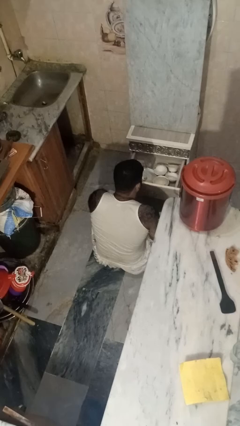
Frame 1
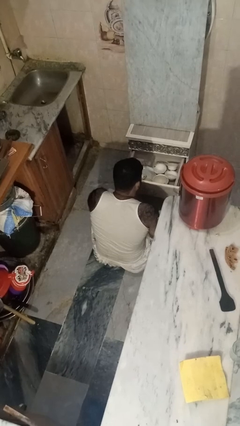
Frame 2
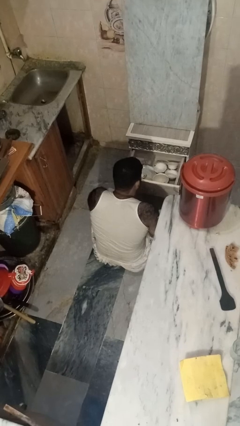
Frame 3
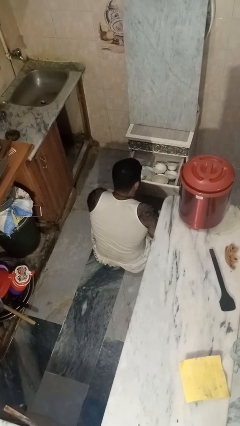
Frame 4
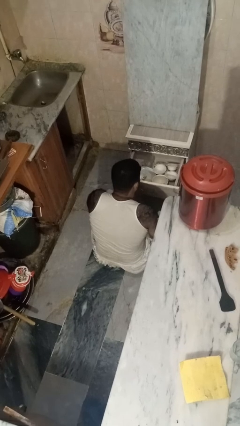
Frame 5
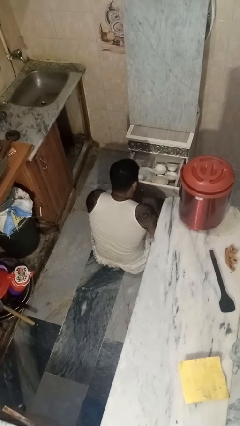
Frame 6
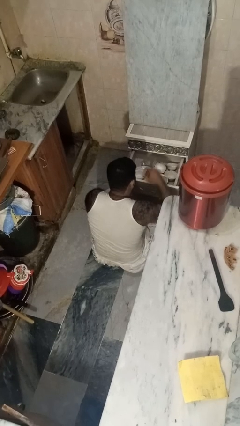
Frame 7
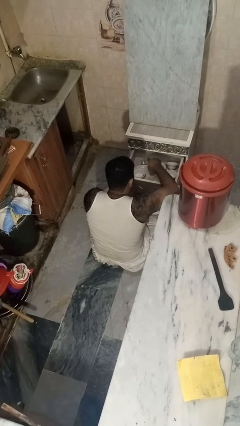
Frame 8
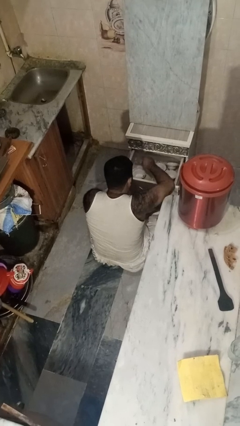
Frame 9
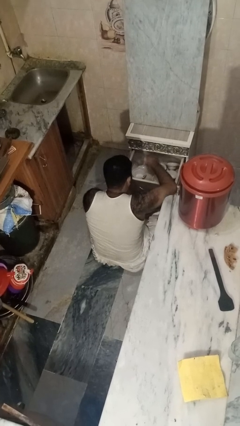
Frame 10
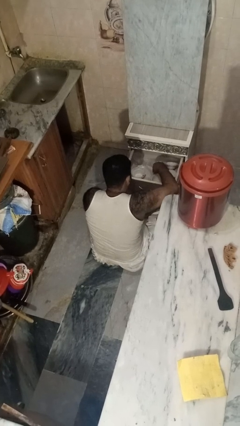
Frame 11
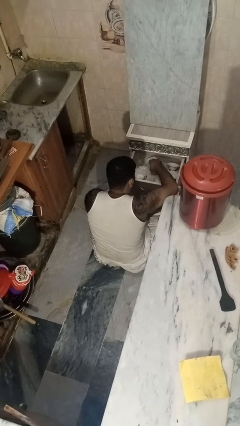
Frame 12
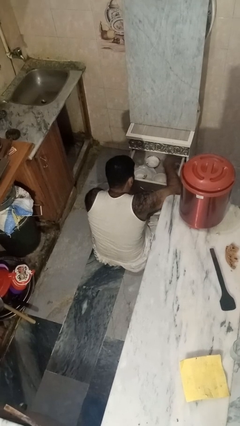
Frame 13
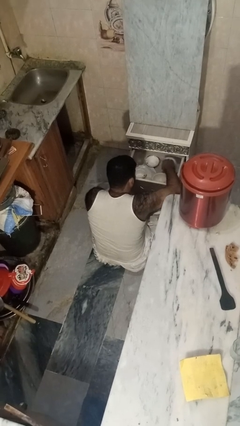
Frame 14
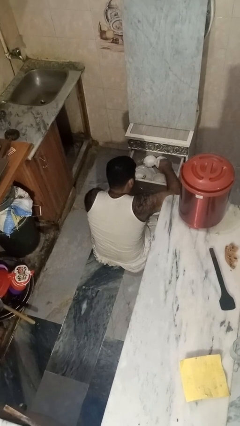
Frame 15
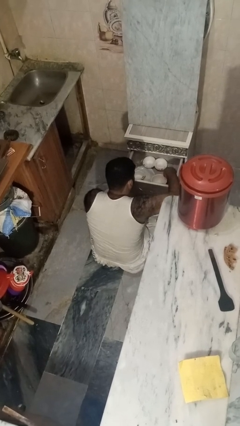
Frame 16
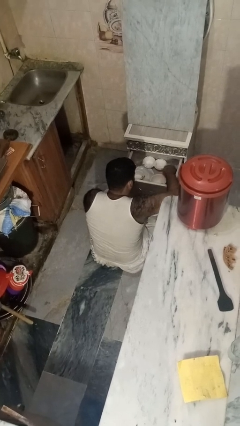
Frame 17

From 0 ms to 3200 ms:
person searches in kitchen drawer

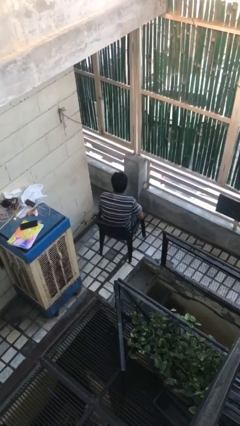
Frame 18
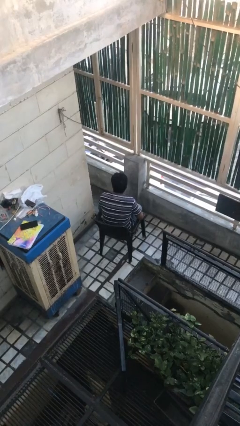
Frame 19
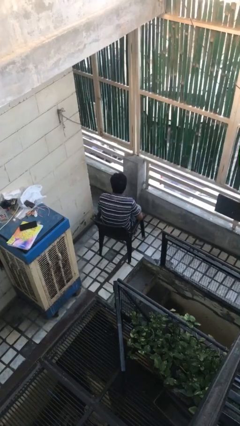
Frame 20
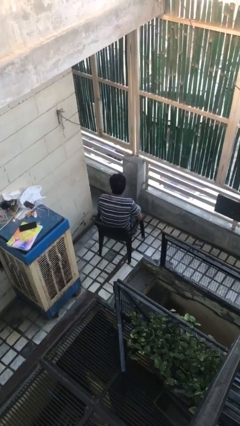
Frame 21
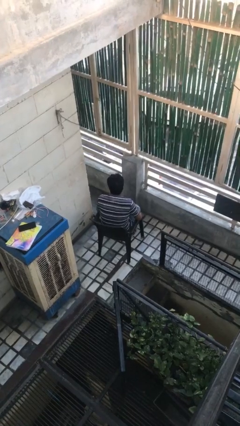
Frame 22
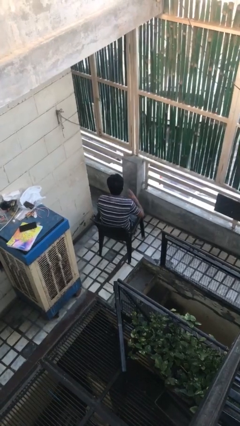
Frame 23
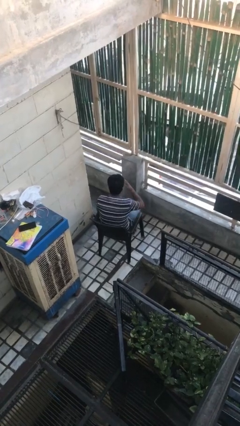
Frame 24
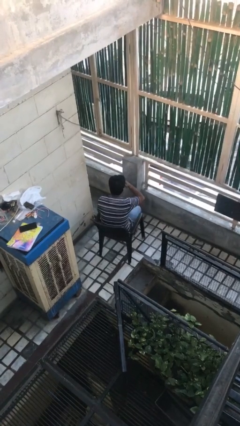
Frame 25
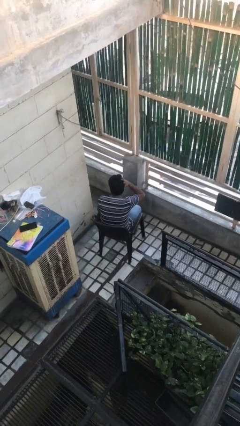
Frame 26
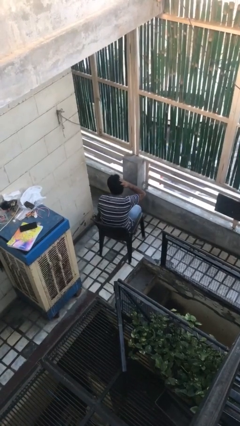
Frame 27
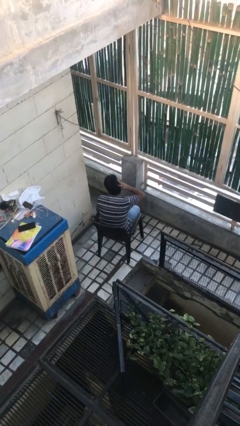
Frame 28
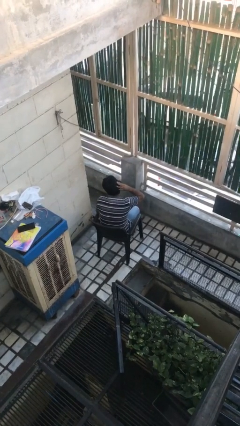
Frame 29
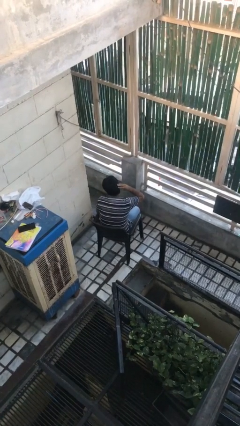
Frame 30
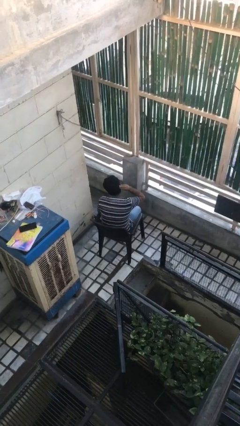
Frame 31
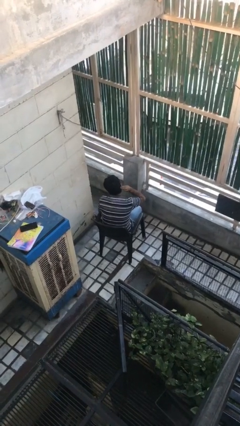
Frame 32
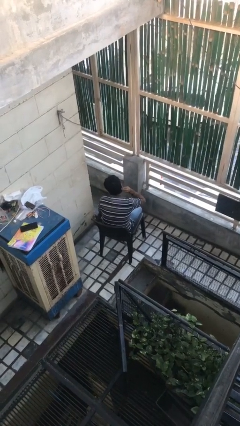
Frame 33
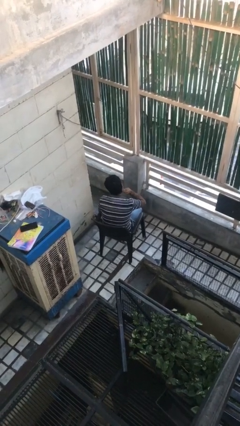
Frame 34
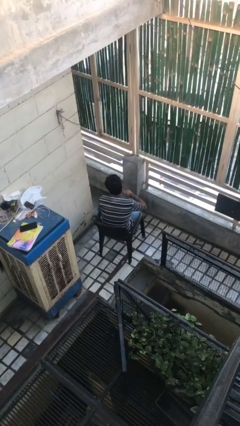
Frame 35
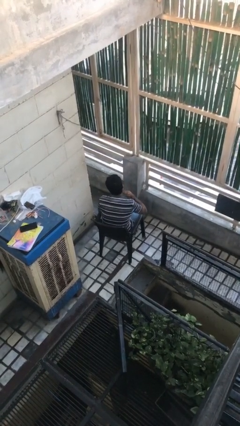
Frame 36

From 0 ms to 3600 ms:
person strokes hair

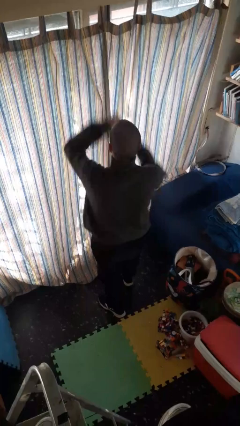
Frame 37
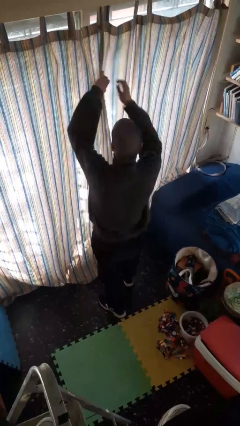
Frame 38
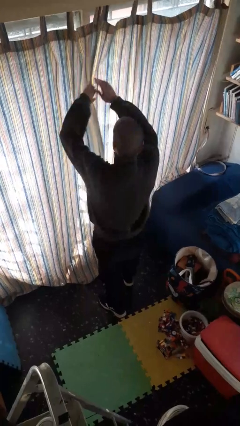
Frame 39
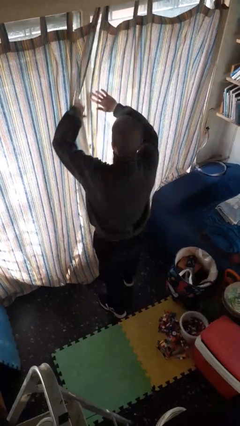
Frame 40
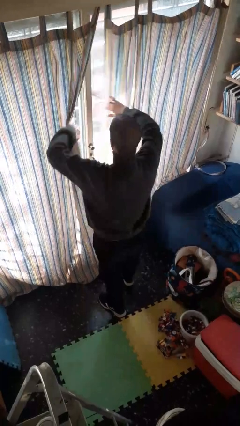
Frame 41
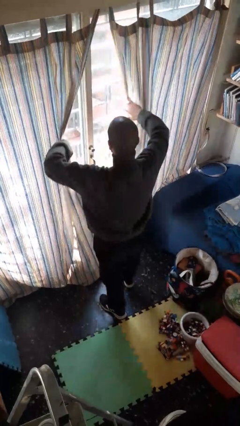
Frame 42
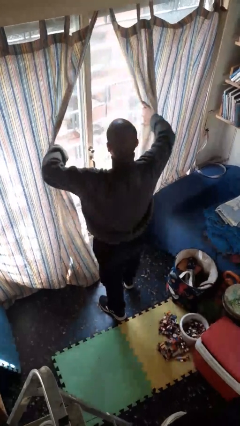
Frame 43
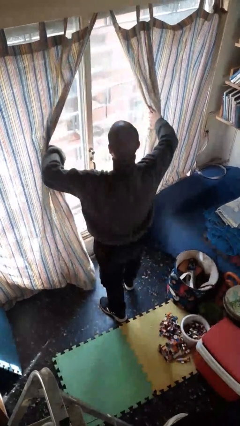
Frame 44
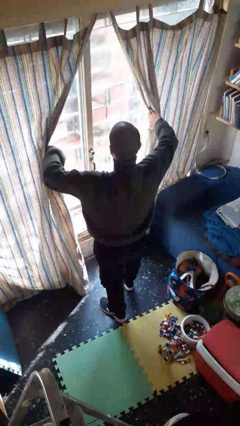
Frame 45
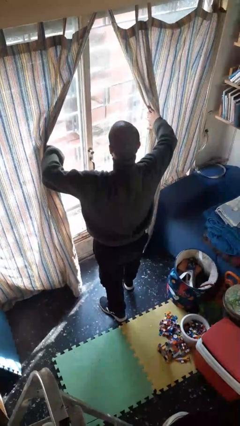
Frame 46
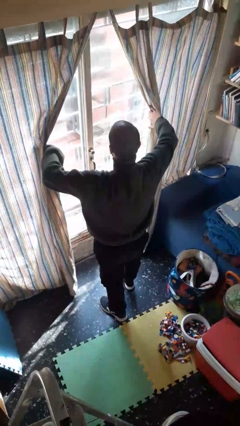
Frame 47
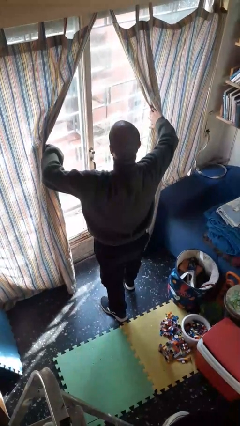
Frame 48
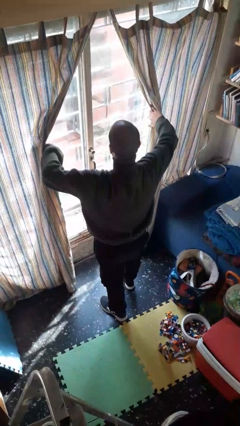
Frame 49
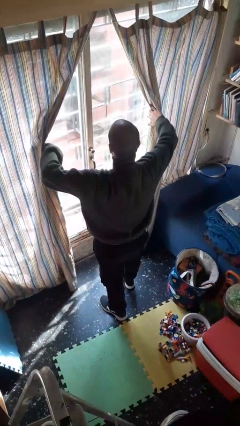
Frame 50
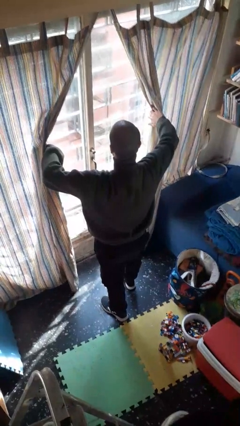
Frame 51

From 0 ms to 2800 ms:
person opens curtains

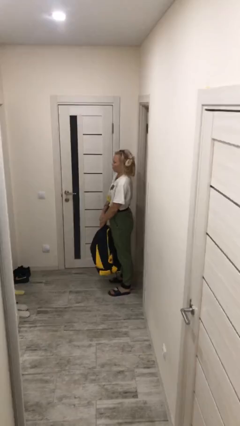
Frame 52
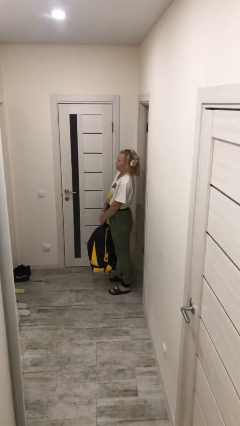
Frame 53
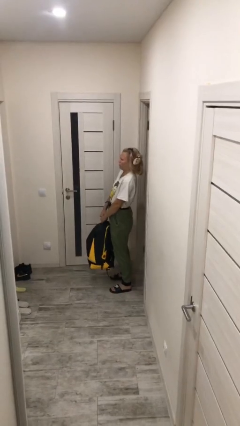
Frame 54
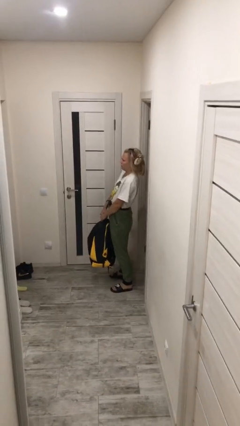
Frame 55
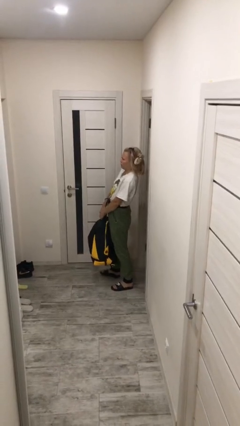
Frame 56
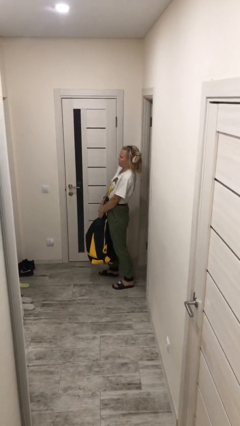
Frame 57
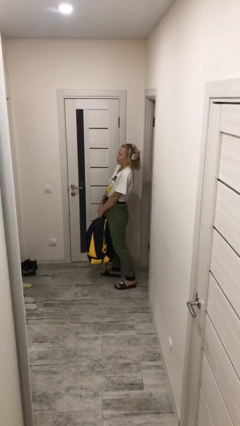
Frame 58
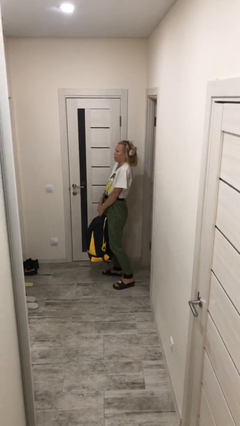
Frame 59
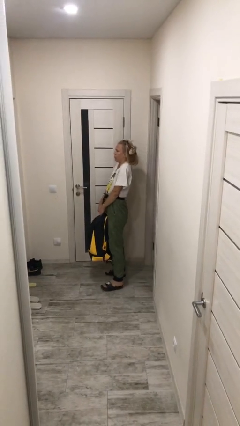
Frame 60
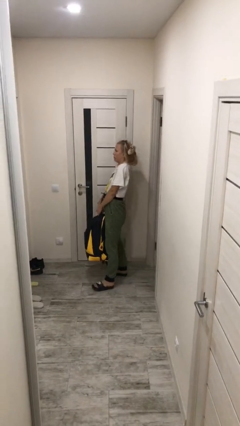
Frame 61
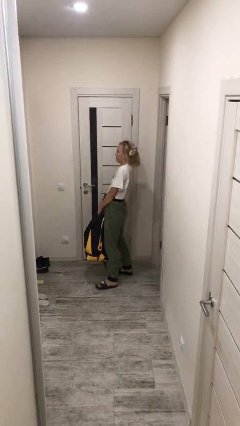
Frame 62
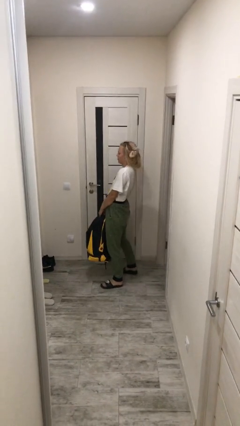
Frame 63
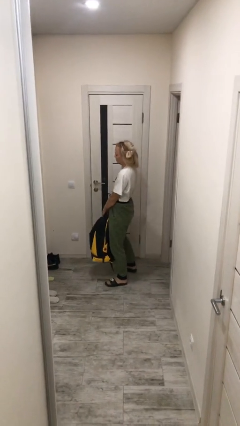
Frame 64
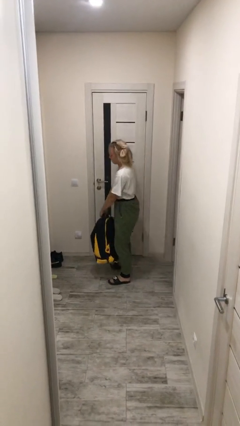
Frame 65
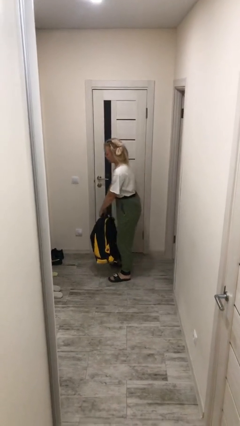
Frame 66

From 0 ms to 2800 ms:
person carries heavy object

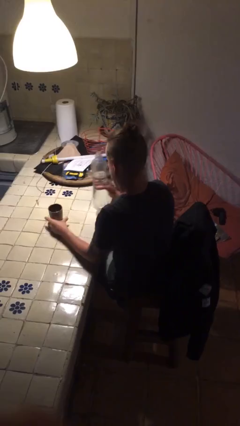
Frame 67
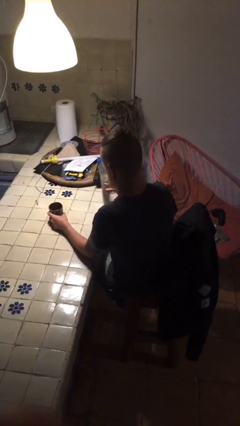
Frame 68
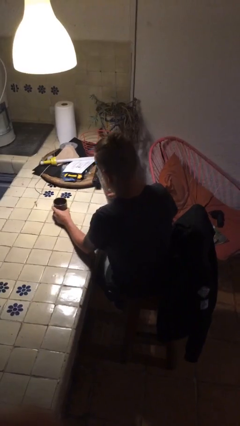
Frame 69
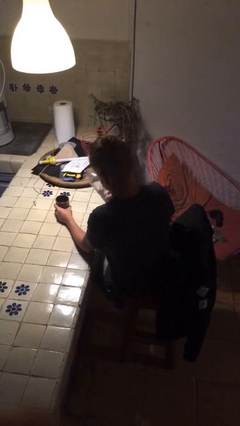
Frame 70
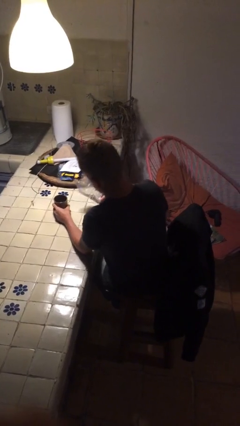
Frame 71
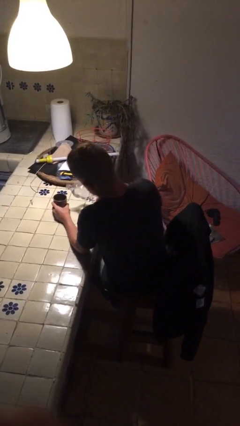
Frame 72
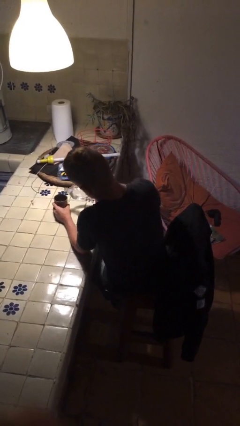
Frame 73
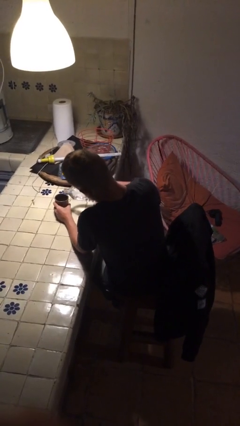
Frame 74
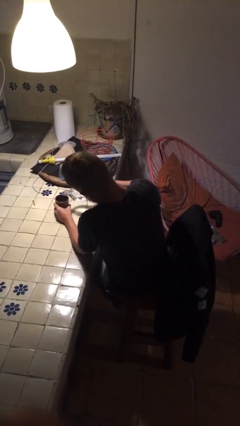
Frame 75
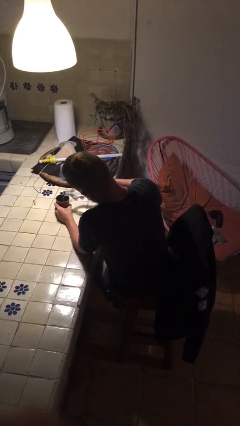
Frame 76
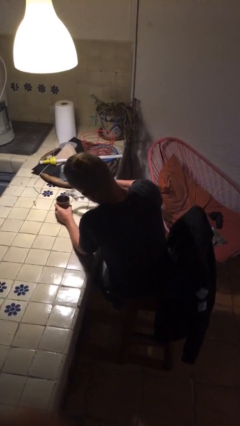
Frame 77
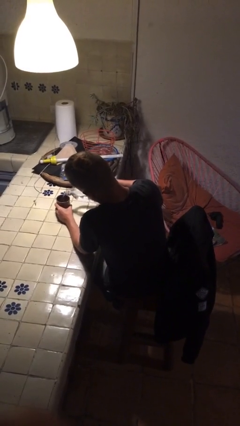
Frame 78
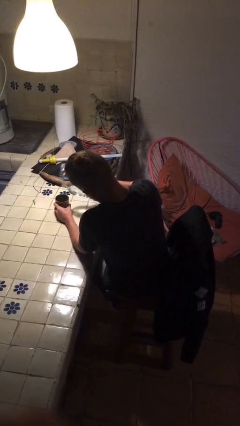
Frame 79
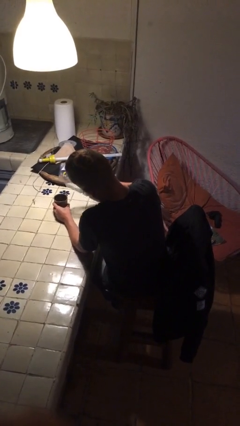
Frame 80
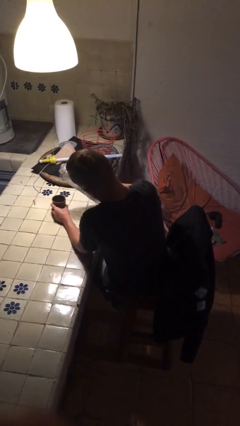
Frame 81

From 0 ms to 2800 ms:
person pours liquid into cup

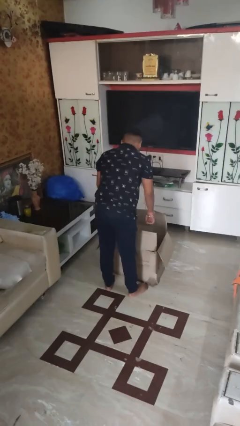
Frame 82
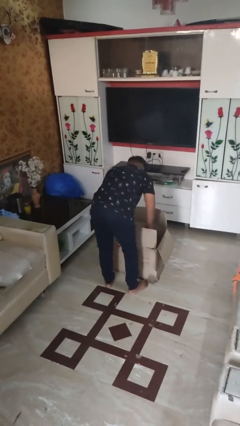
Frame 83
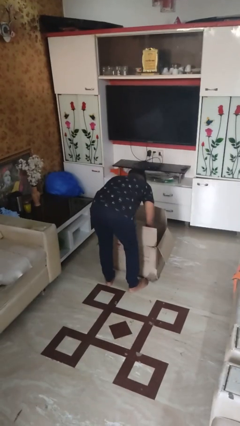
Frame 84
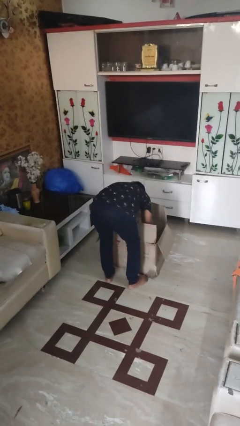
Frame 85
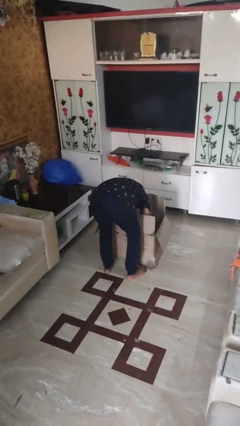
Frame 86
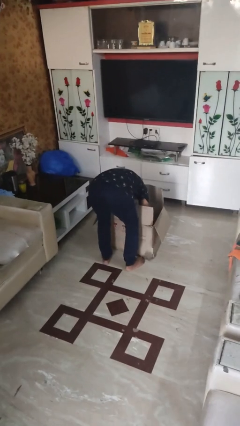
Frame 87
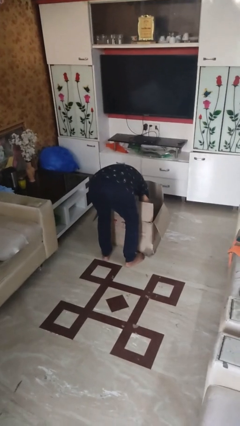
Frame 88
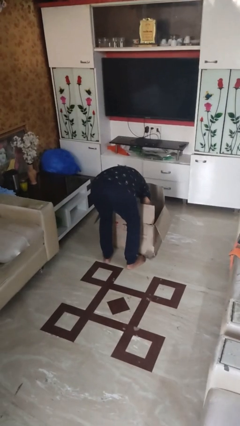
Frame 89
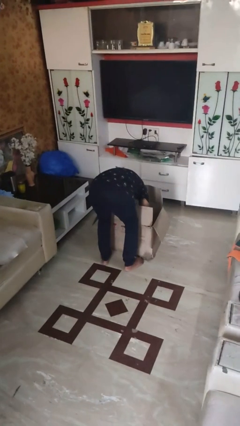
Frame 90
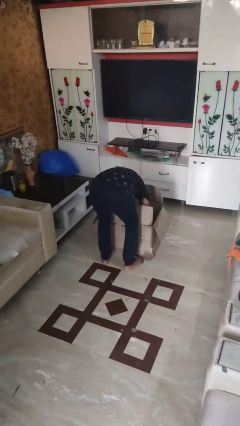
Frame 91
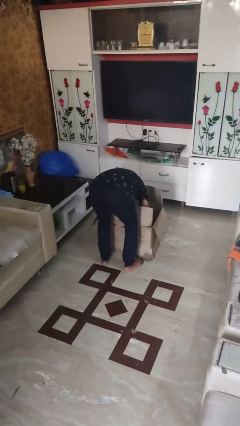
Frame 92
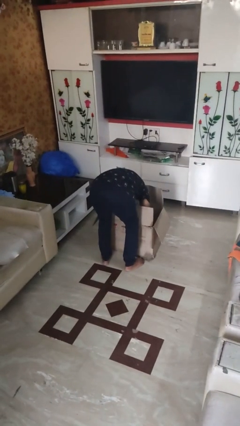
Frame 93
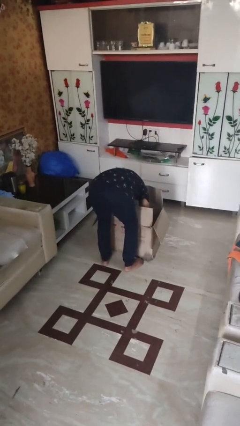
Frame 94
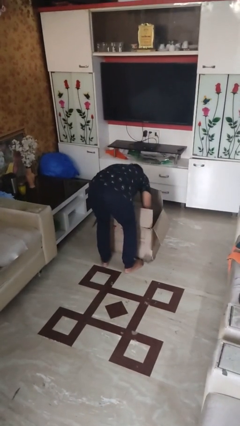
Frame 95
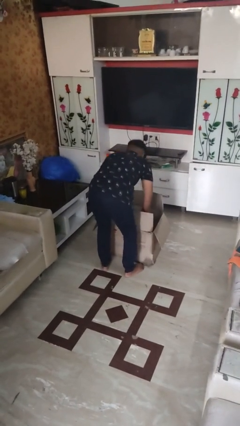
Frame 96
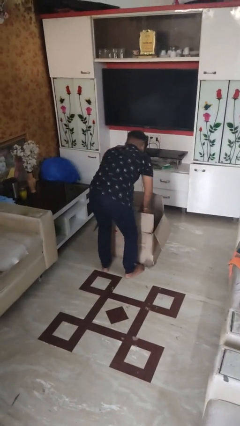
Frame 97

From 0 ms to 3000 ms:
person searches in box
